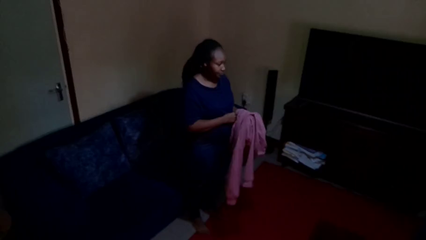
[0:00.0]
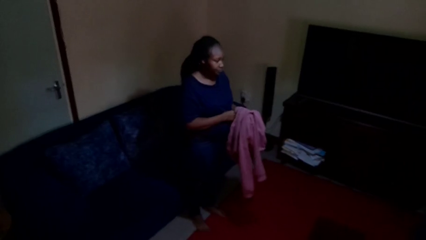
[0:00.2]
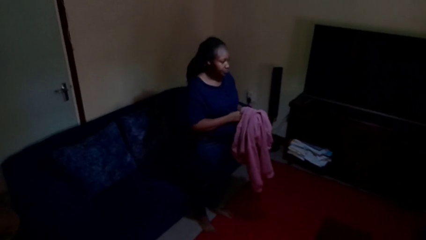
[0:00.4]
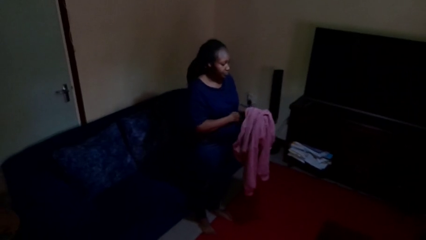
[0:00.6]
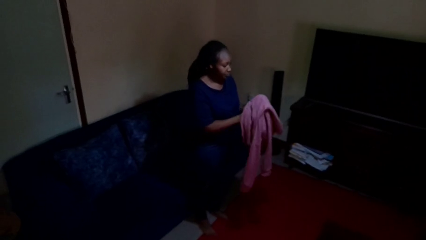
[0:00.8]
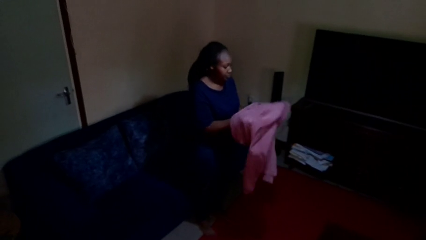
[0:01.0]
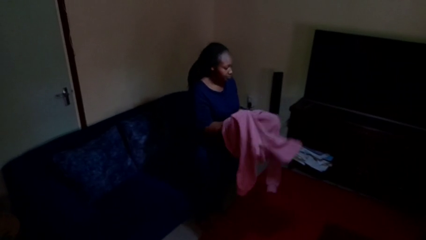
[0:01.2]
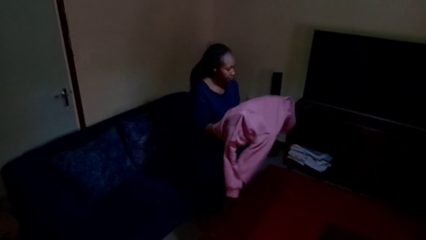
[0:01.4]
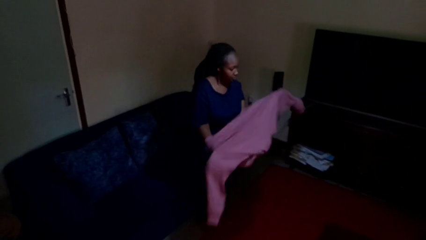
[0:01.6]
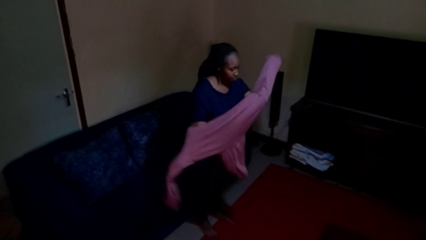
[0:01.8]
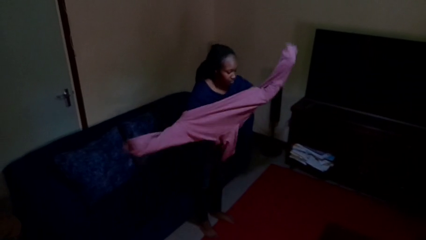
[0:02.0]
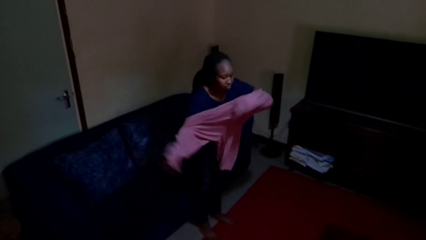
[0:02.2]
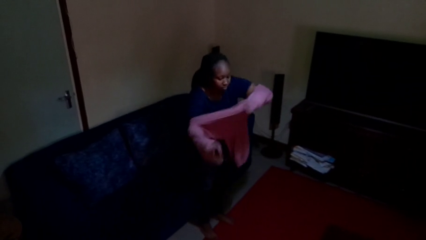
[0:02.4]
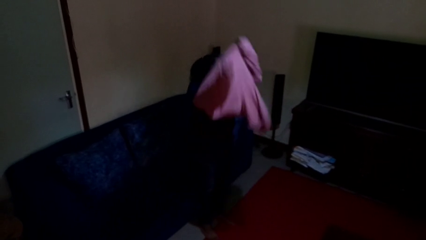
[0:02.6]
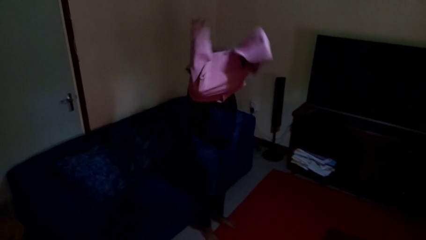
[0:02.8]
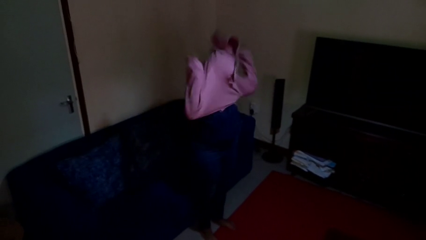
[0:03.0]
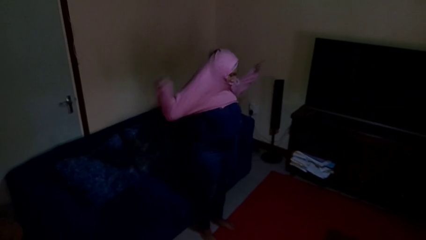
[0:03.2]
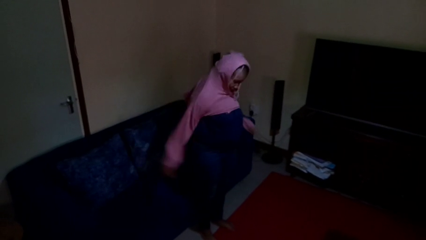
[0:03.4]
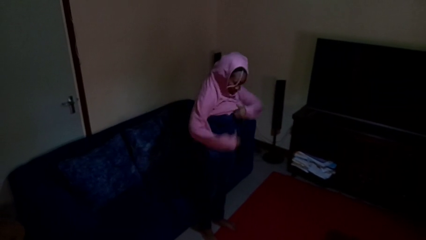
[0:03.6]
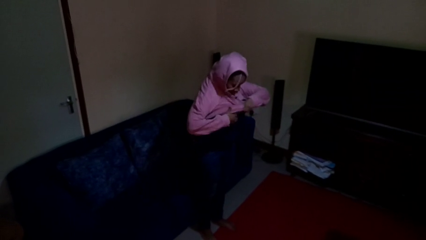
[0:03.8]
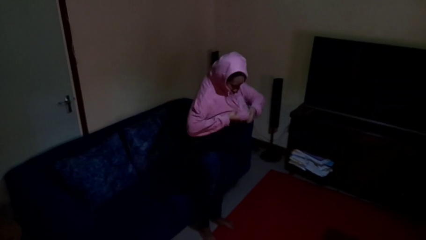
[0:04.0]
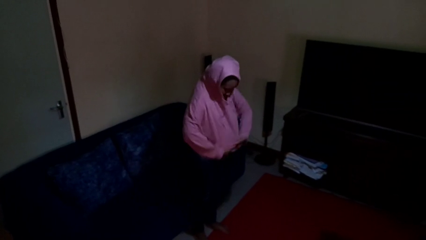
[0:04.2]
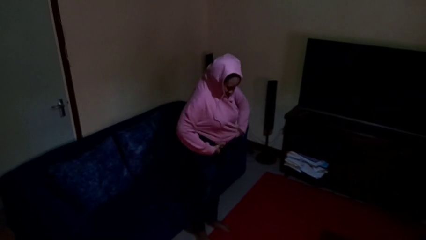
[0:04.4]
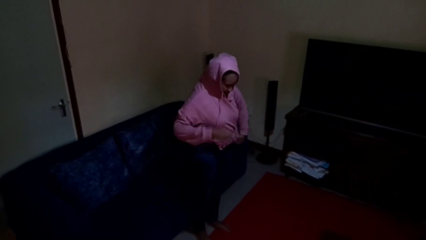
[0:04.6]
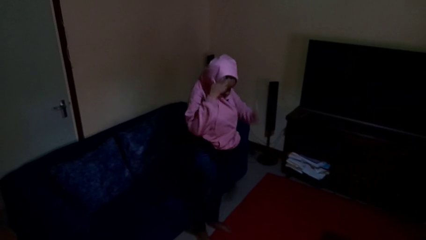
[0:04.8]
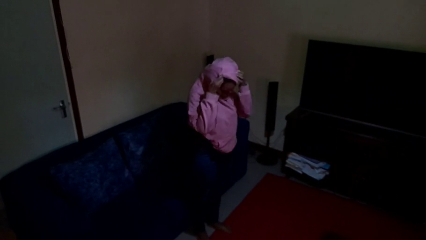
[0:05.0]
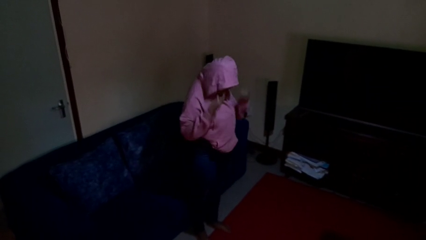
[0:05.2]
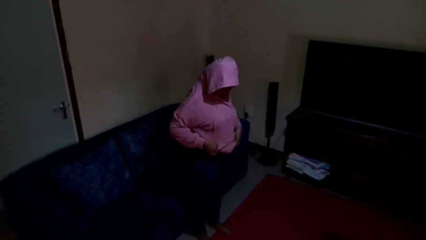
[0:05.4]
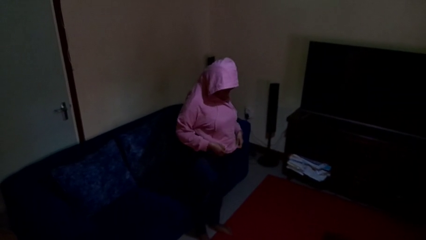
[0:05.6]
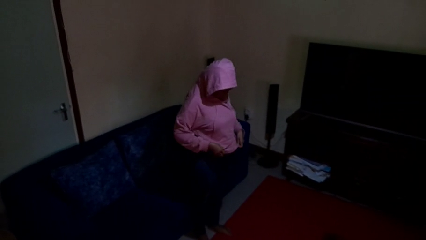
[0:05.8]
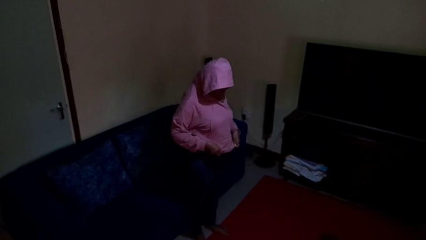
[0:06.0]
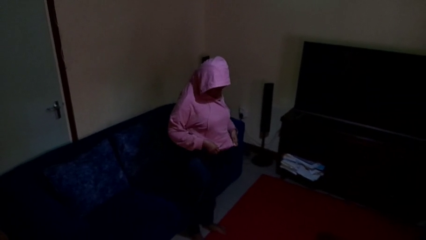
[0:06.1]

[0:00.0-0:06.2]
person puts on hoodie

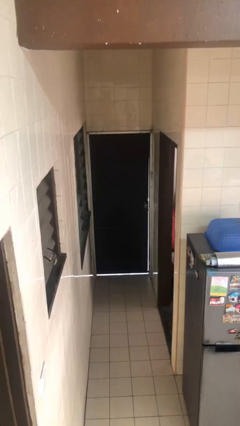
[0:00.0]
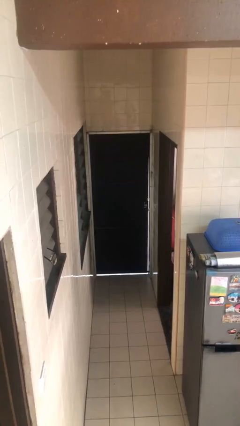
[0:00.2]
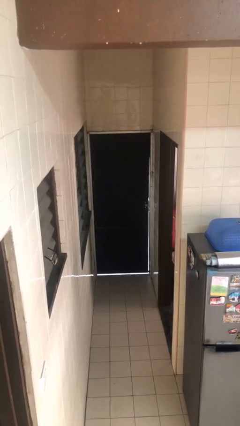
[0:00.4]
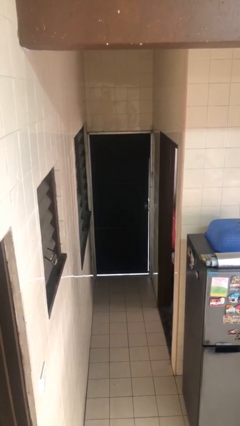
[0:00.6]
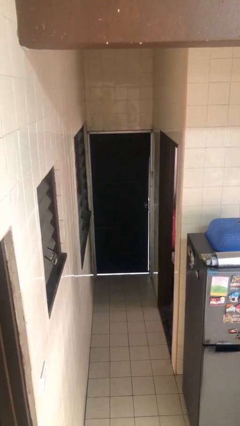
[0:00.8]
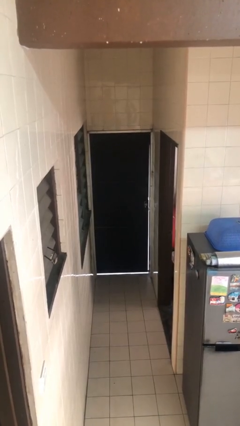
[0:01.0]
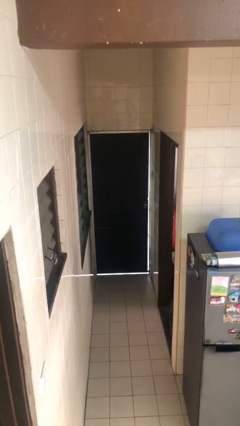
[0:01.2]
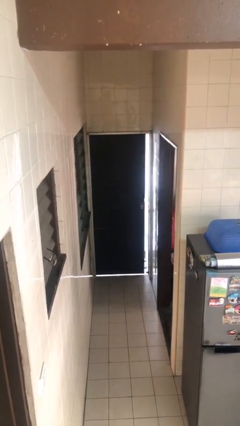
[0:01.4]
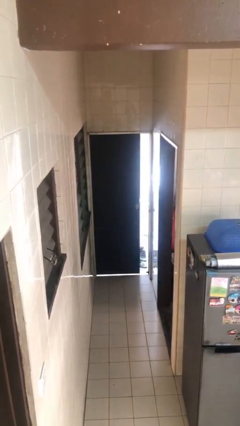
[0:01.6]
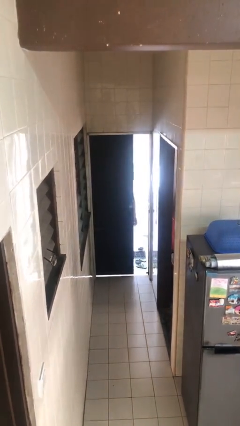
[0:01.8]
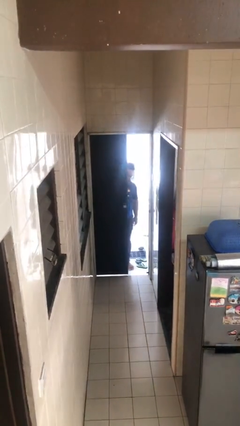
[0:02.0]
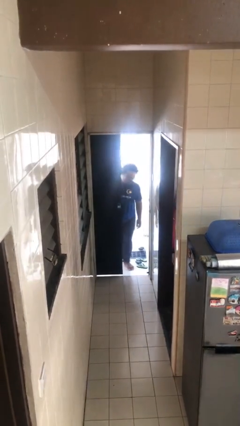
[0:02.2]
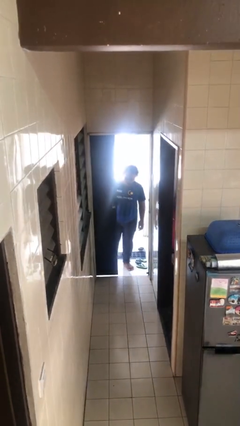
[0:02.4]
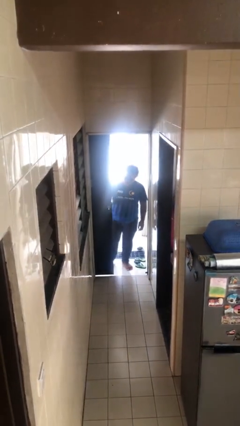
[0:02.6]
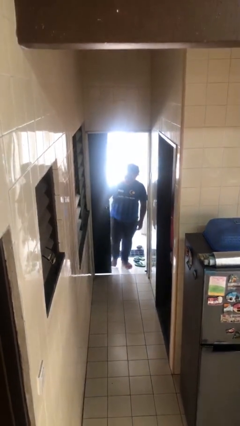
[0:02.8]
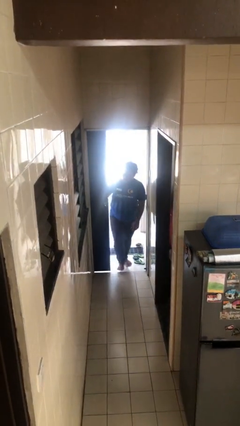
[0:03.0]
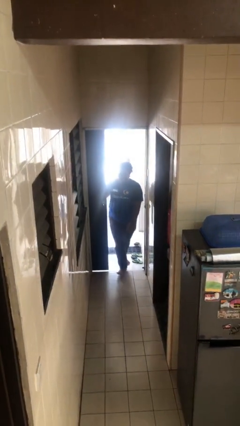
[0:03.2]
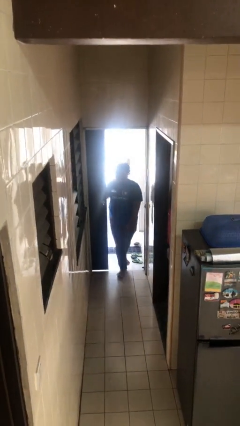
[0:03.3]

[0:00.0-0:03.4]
person opens facility door

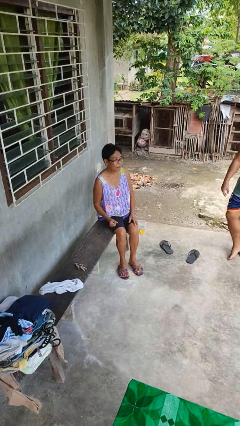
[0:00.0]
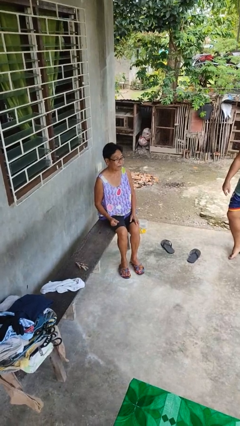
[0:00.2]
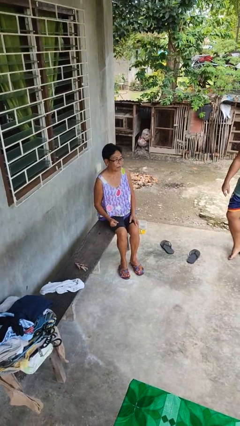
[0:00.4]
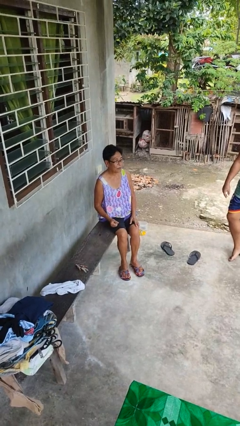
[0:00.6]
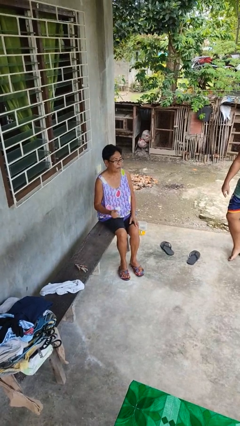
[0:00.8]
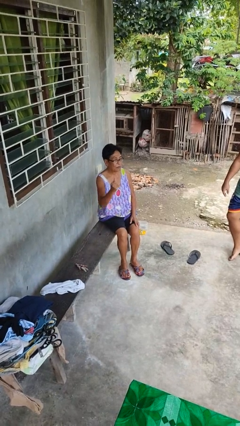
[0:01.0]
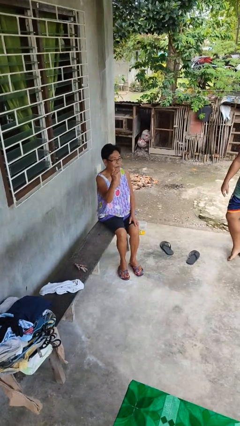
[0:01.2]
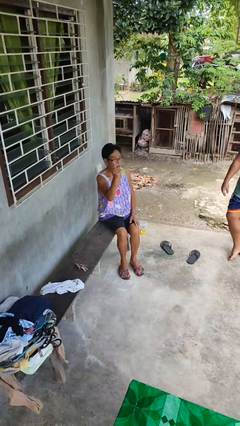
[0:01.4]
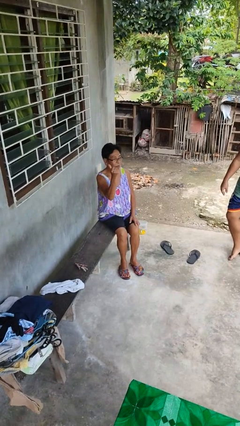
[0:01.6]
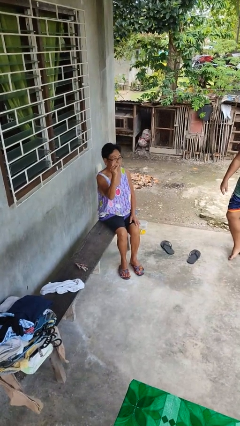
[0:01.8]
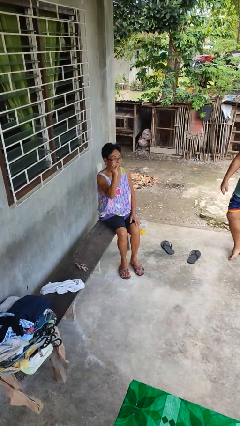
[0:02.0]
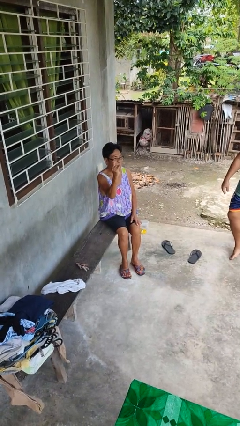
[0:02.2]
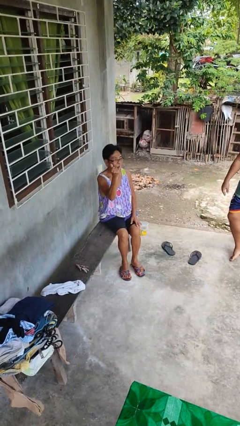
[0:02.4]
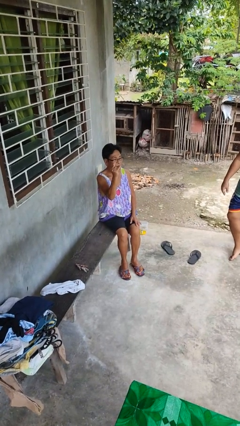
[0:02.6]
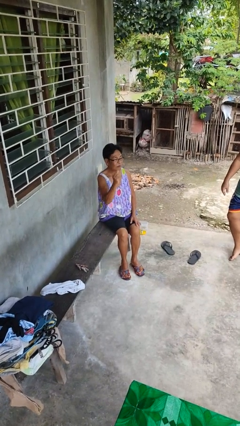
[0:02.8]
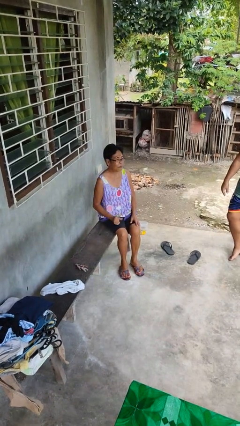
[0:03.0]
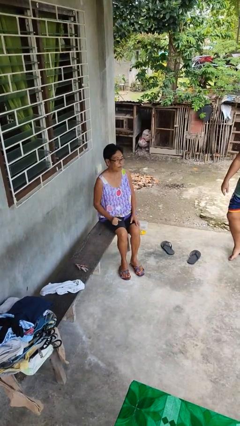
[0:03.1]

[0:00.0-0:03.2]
person gestures hang loose

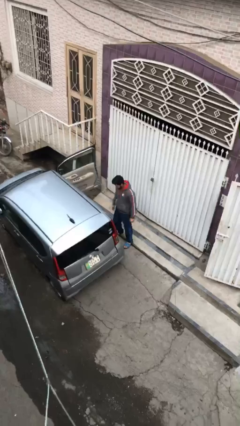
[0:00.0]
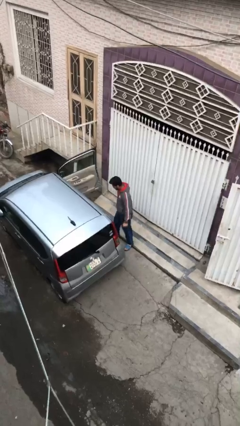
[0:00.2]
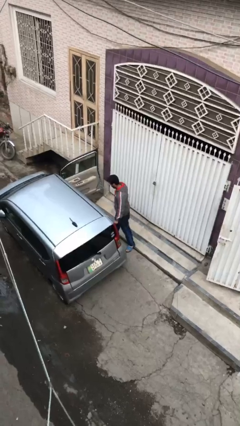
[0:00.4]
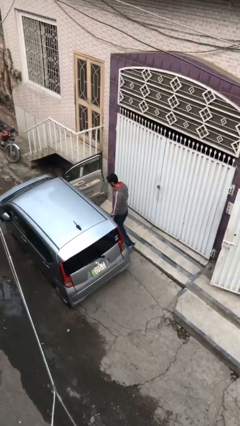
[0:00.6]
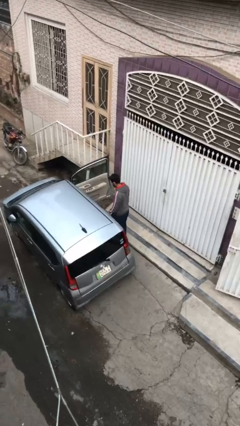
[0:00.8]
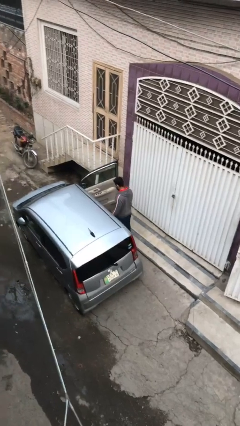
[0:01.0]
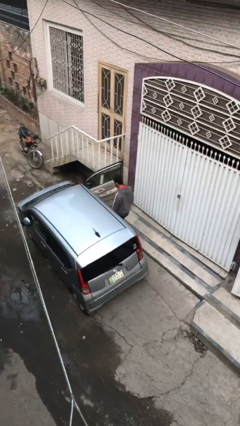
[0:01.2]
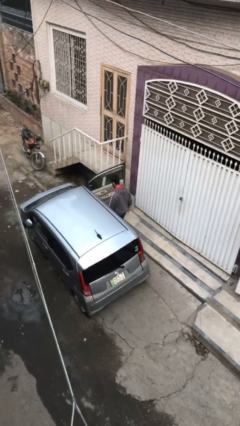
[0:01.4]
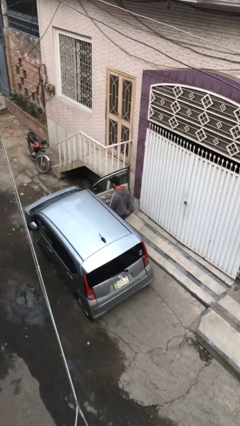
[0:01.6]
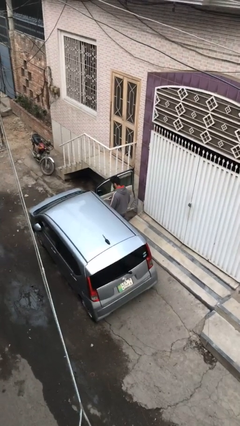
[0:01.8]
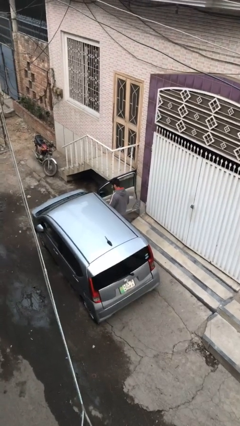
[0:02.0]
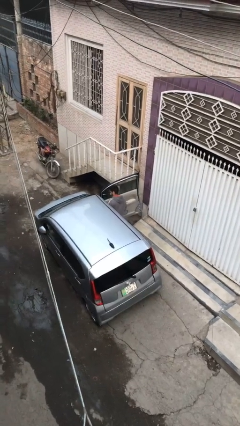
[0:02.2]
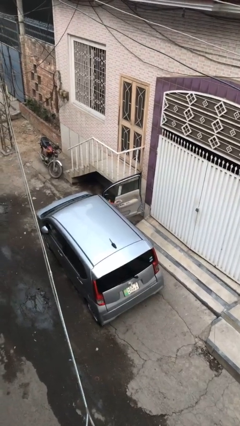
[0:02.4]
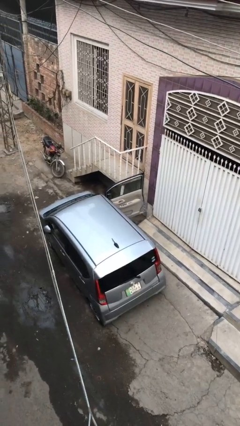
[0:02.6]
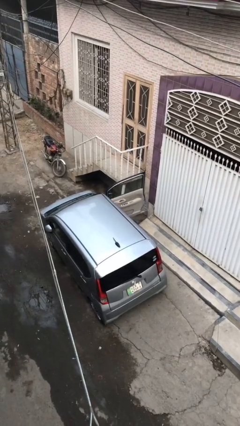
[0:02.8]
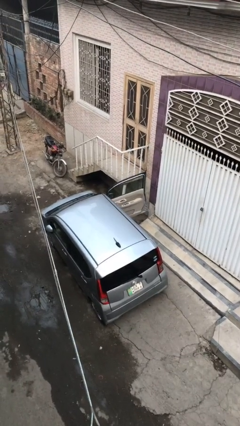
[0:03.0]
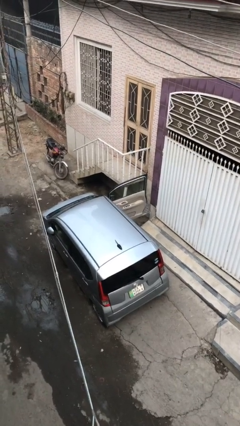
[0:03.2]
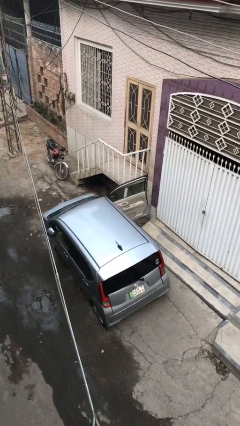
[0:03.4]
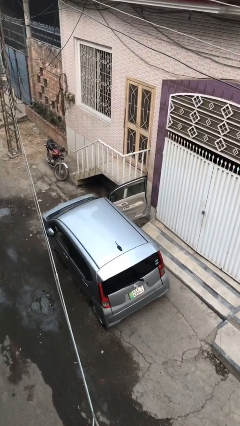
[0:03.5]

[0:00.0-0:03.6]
person enters car

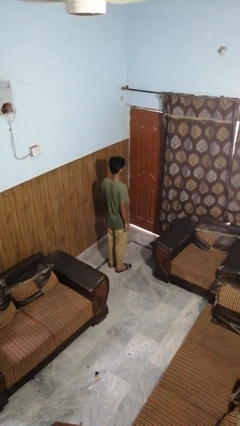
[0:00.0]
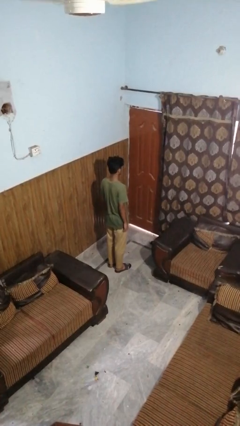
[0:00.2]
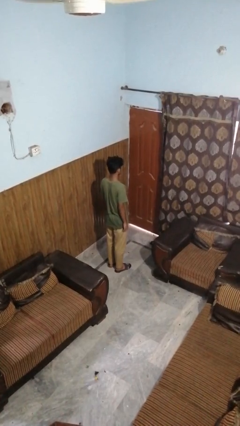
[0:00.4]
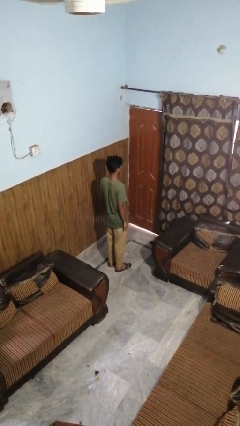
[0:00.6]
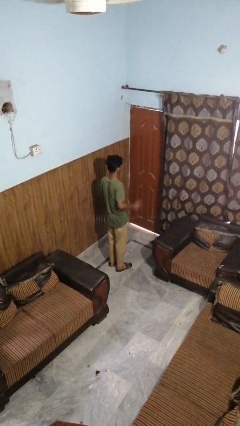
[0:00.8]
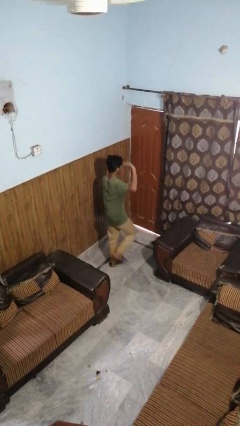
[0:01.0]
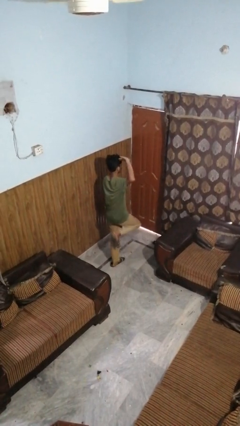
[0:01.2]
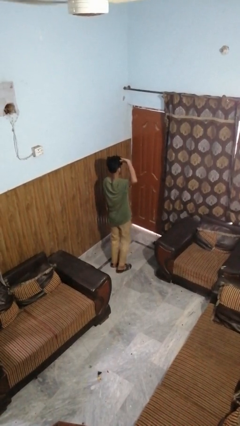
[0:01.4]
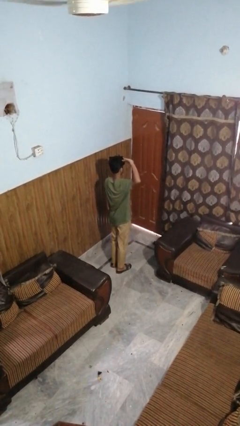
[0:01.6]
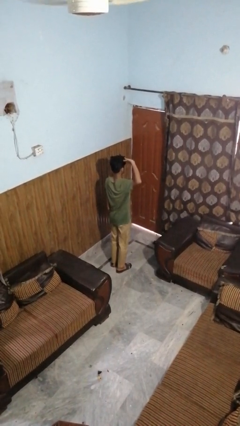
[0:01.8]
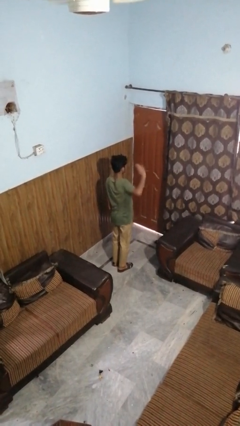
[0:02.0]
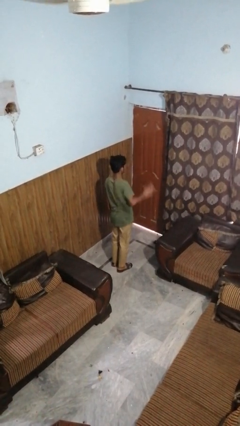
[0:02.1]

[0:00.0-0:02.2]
person salutes
